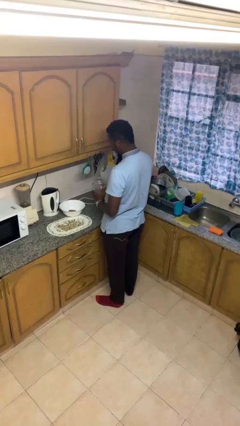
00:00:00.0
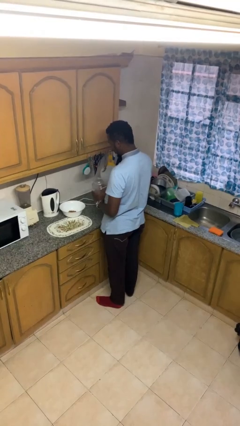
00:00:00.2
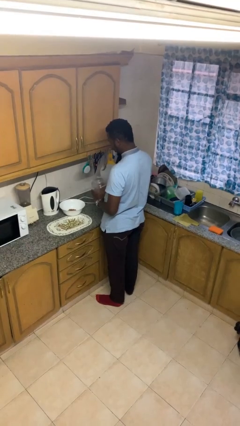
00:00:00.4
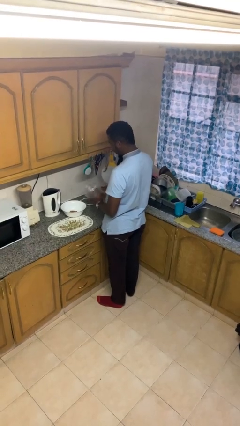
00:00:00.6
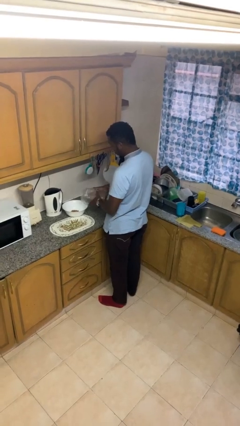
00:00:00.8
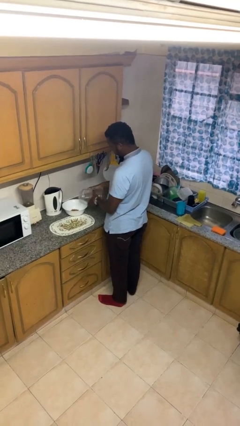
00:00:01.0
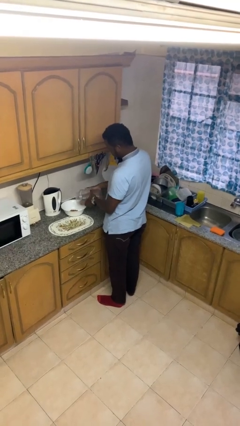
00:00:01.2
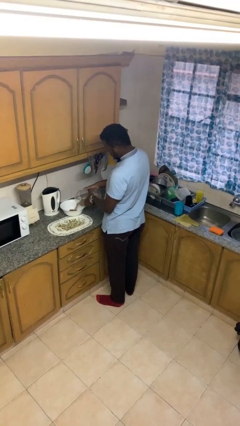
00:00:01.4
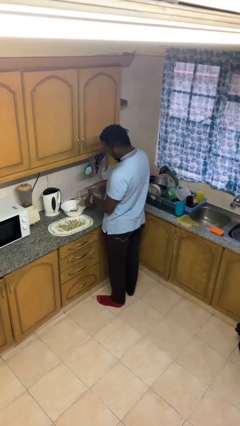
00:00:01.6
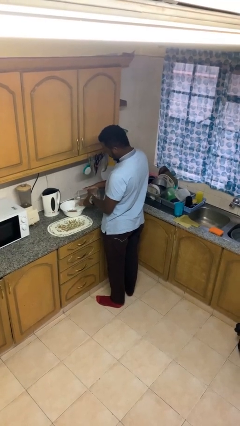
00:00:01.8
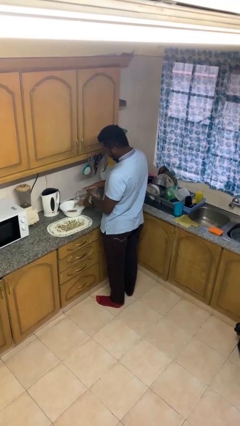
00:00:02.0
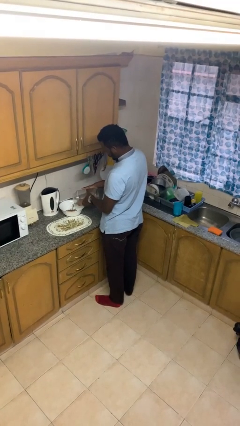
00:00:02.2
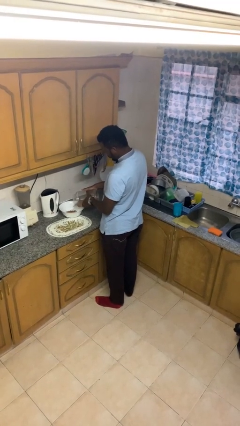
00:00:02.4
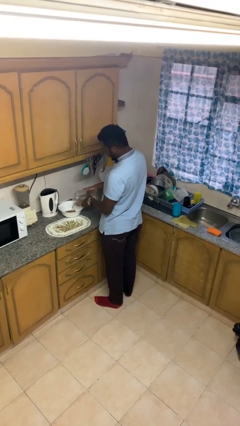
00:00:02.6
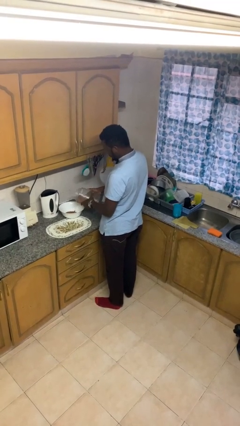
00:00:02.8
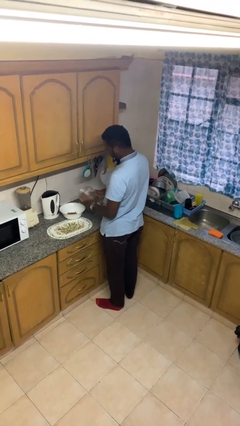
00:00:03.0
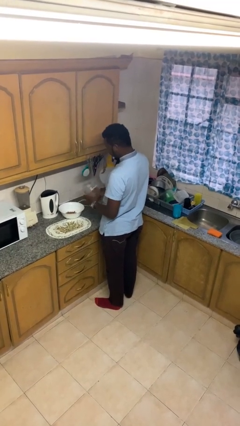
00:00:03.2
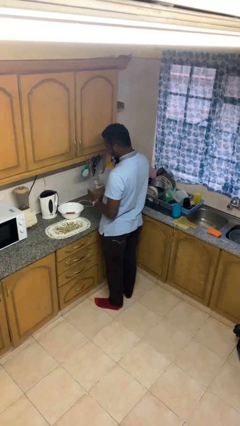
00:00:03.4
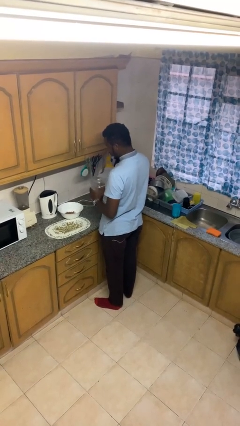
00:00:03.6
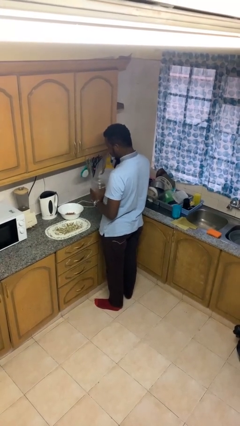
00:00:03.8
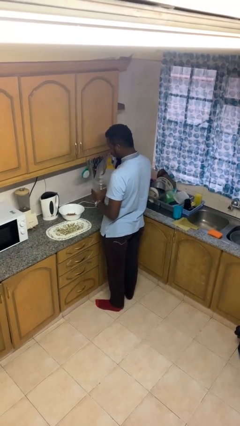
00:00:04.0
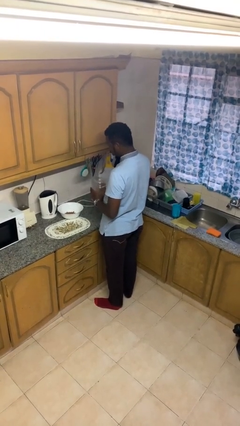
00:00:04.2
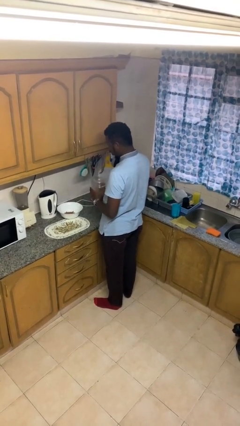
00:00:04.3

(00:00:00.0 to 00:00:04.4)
person pours into bowl

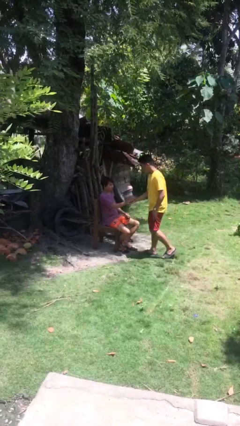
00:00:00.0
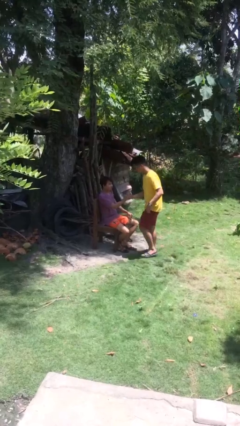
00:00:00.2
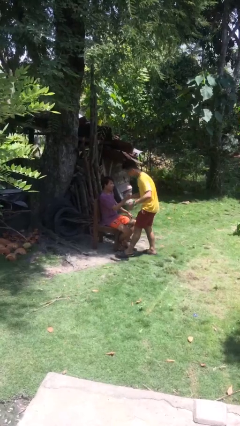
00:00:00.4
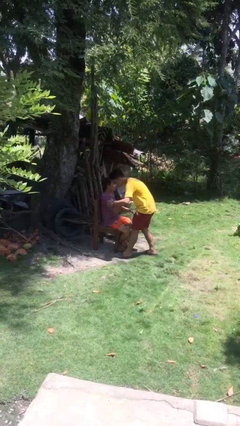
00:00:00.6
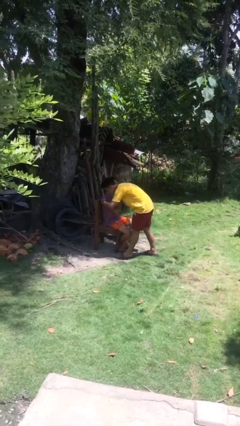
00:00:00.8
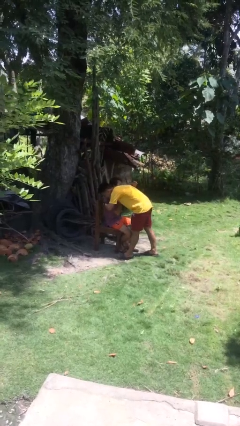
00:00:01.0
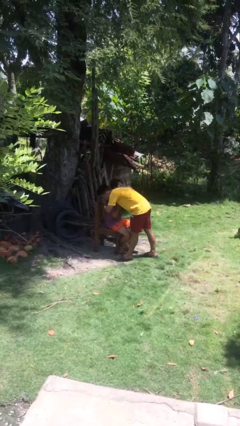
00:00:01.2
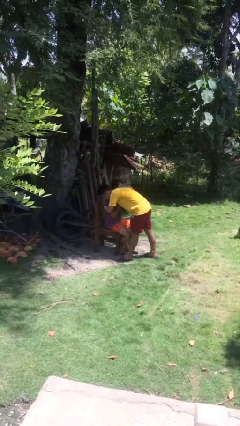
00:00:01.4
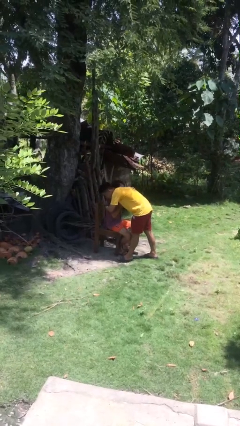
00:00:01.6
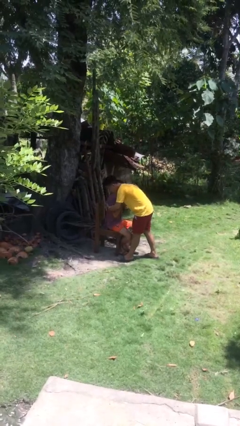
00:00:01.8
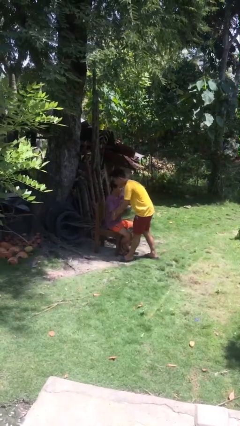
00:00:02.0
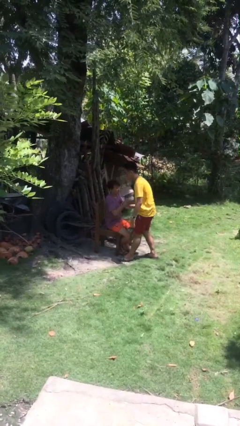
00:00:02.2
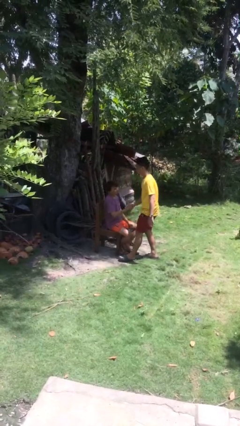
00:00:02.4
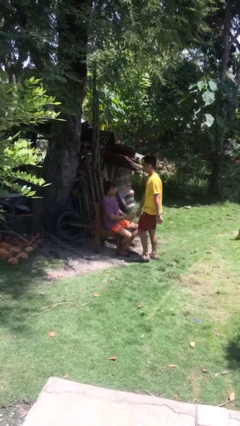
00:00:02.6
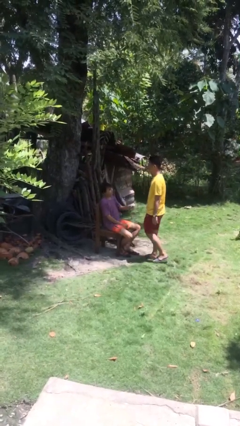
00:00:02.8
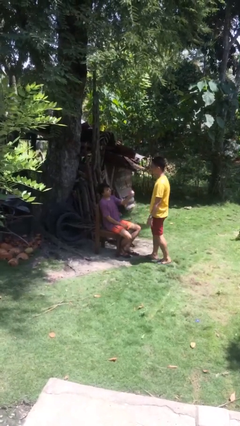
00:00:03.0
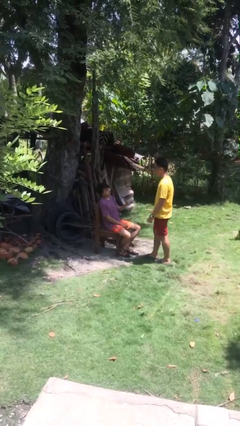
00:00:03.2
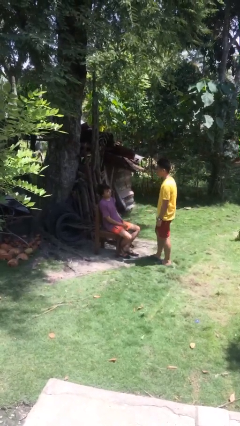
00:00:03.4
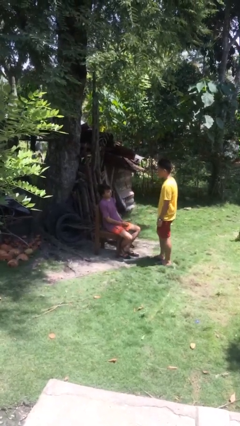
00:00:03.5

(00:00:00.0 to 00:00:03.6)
person embraces person

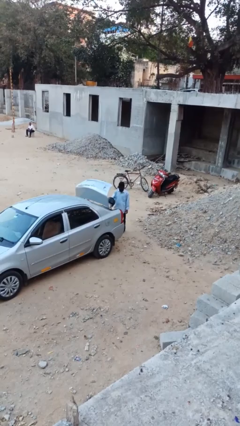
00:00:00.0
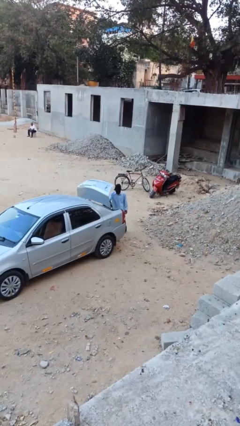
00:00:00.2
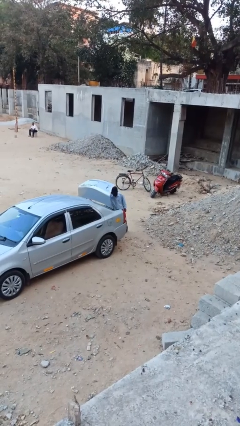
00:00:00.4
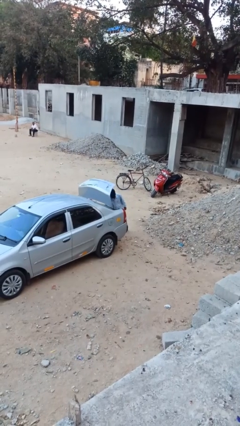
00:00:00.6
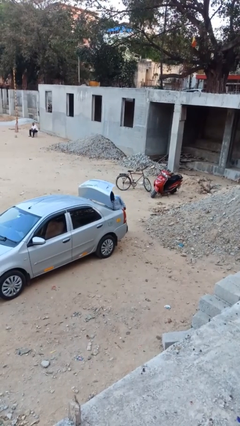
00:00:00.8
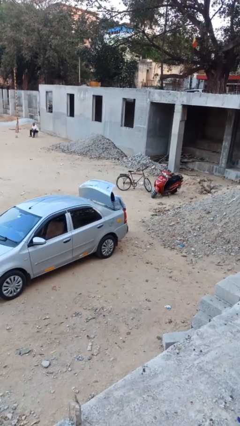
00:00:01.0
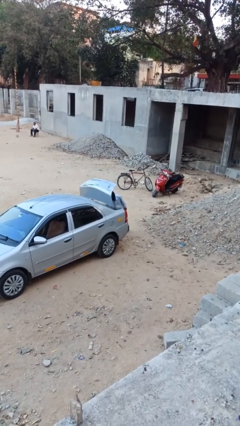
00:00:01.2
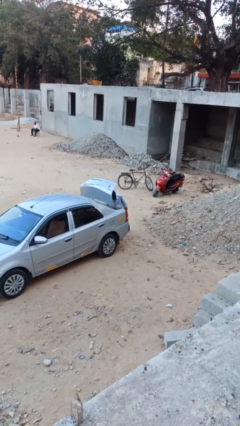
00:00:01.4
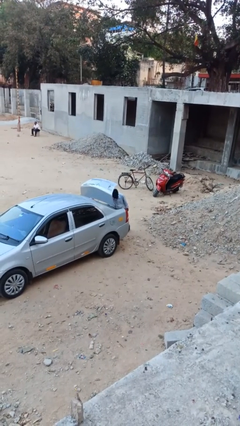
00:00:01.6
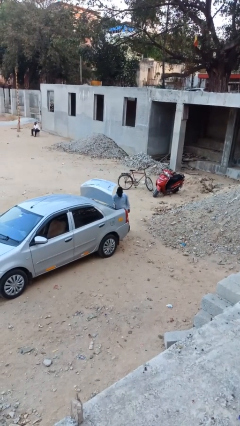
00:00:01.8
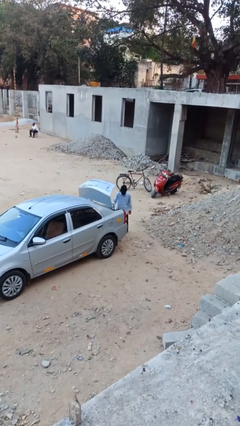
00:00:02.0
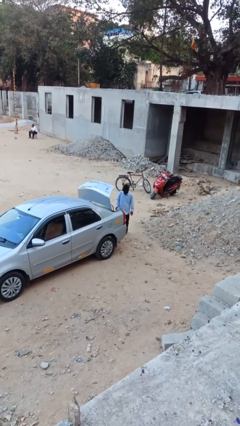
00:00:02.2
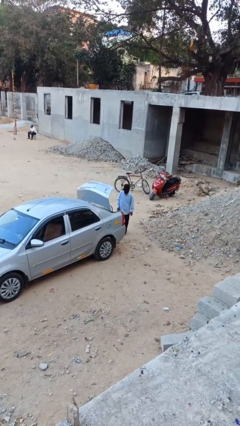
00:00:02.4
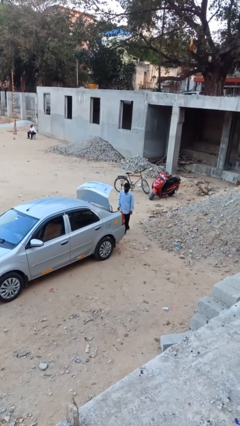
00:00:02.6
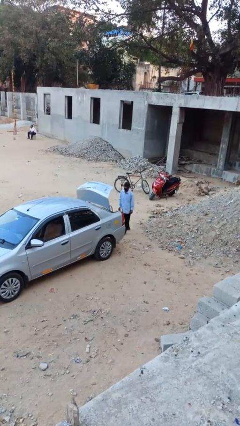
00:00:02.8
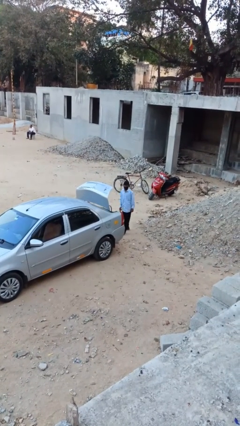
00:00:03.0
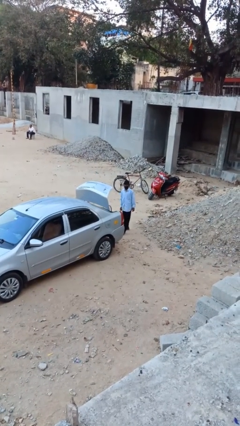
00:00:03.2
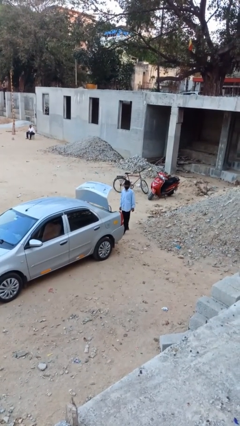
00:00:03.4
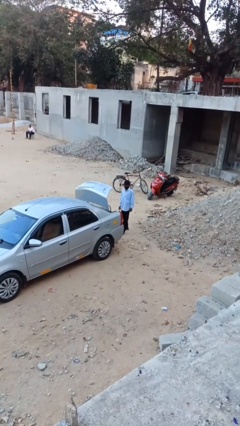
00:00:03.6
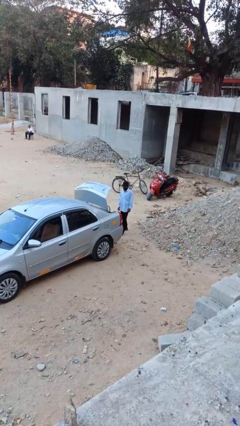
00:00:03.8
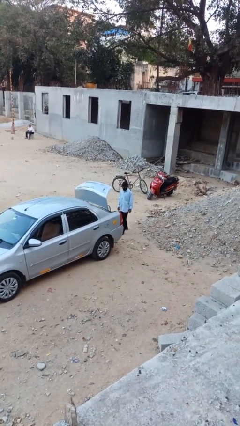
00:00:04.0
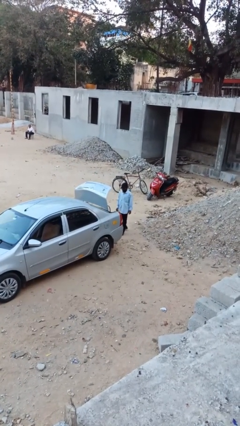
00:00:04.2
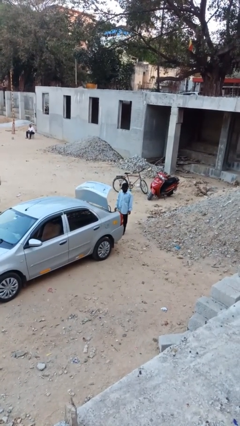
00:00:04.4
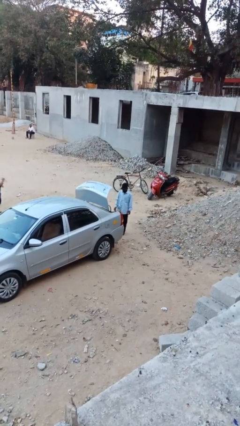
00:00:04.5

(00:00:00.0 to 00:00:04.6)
person loads car

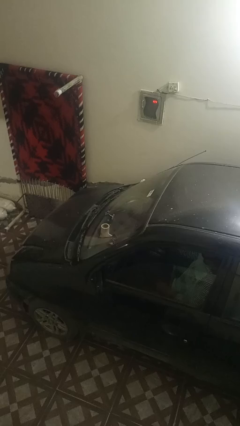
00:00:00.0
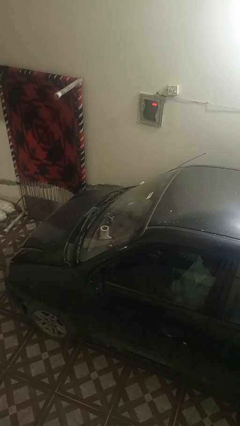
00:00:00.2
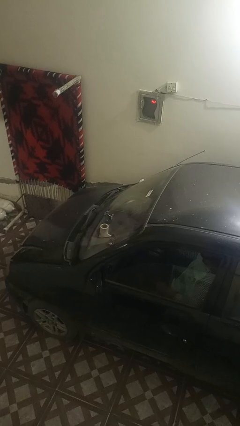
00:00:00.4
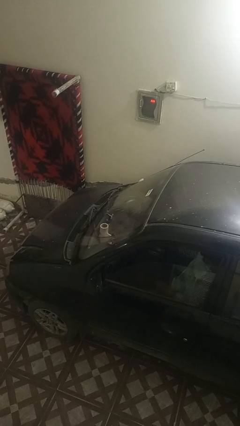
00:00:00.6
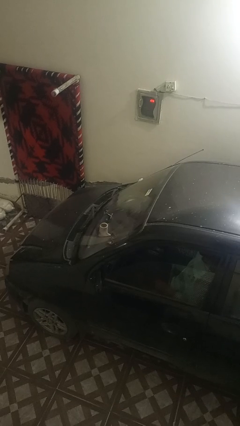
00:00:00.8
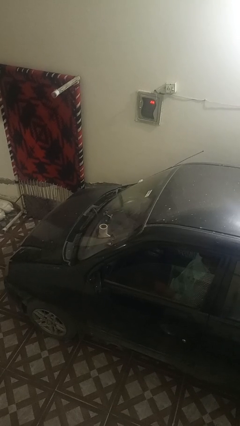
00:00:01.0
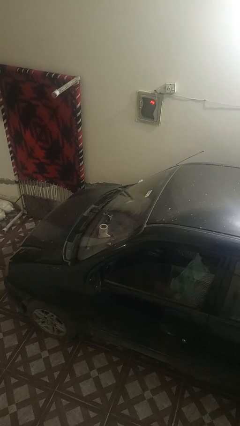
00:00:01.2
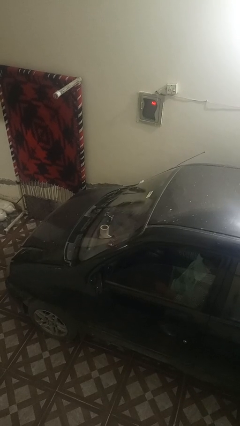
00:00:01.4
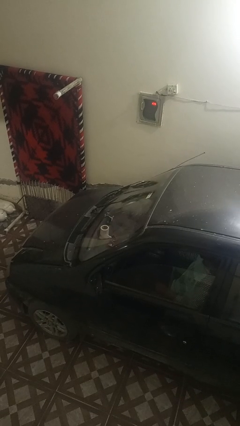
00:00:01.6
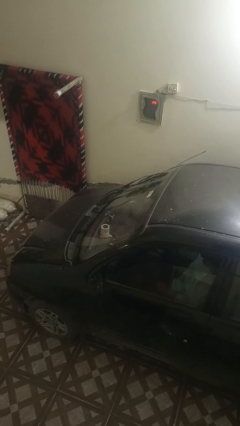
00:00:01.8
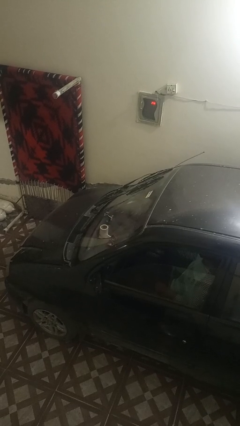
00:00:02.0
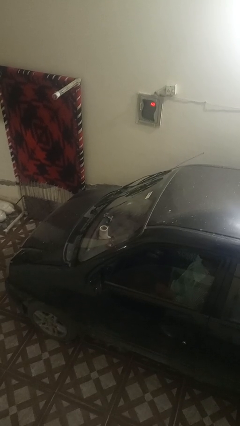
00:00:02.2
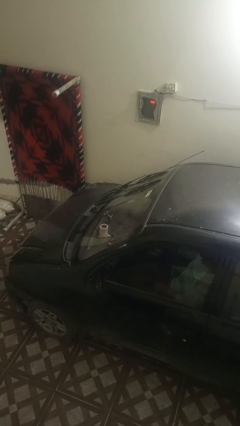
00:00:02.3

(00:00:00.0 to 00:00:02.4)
person flips up car wipers

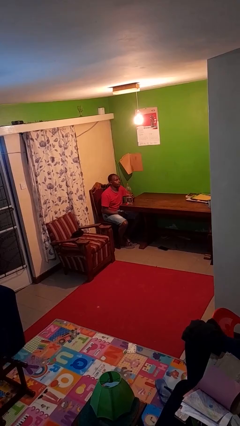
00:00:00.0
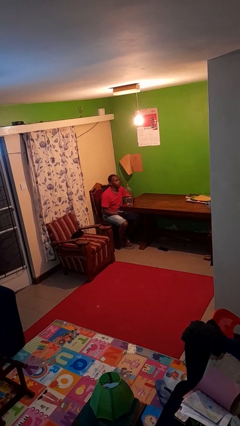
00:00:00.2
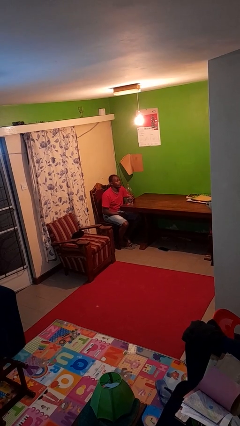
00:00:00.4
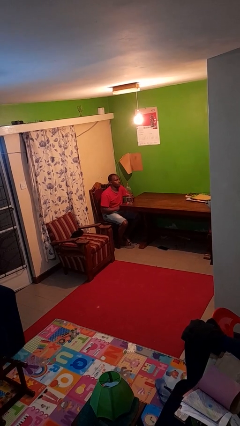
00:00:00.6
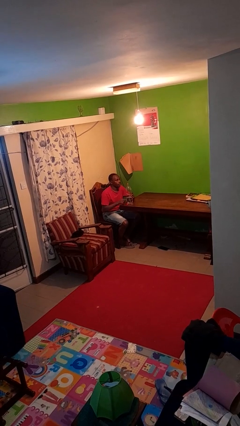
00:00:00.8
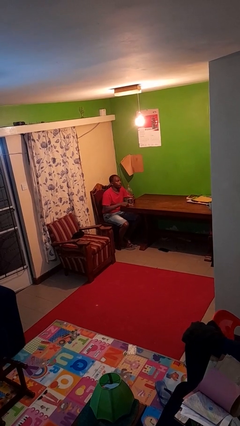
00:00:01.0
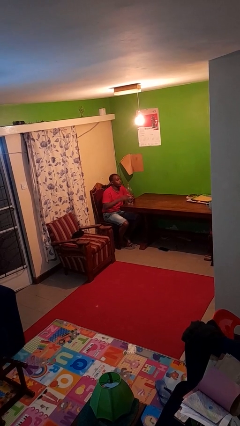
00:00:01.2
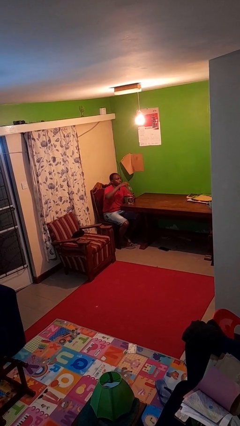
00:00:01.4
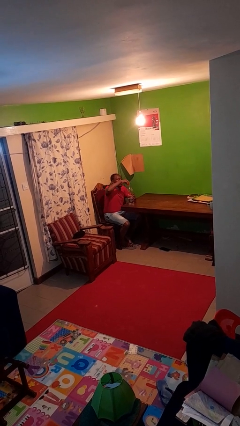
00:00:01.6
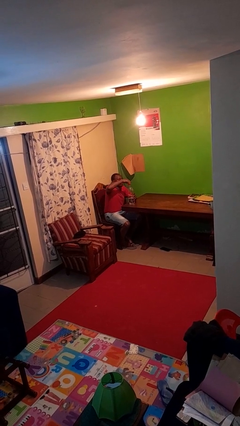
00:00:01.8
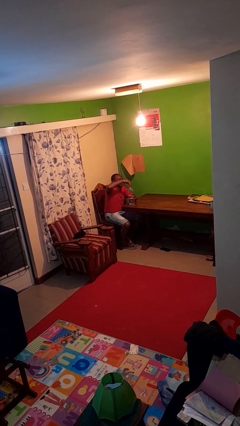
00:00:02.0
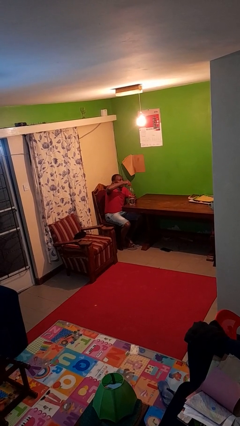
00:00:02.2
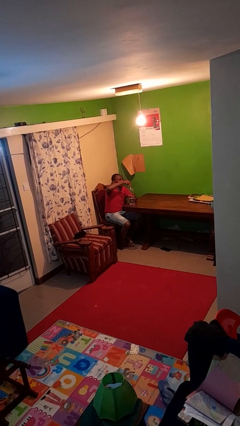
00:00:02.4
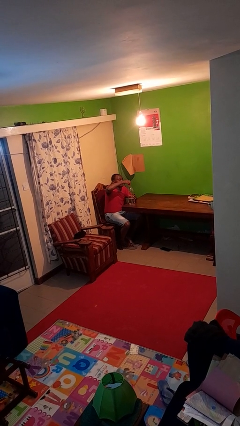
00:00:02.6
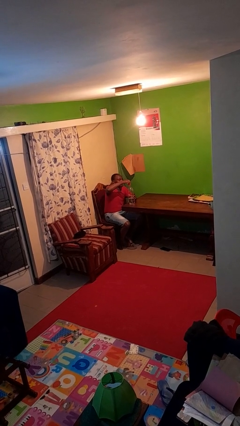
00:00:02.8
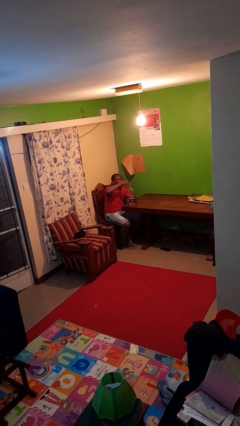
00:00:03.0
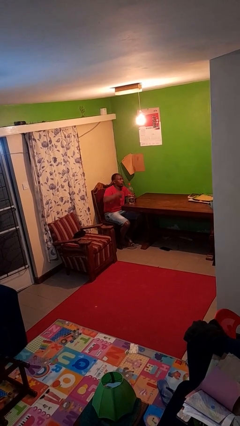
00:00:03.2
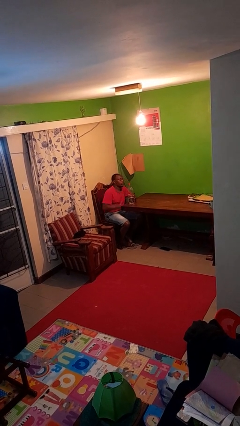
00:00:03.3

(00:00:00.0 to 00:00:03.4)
person screws lid to bottle
